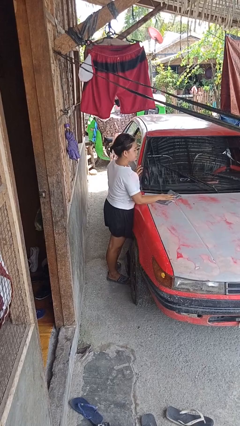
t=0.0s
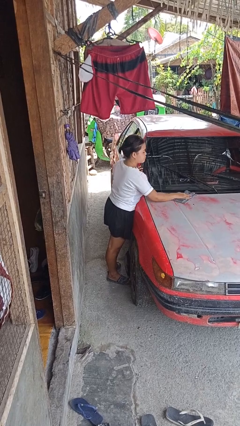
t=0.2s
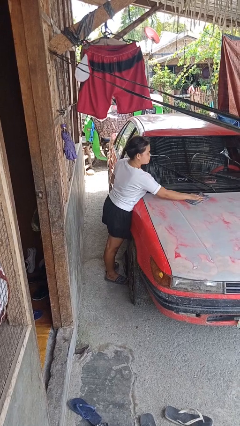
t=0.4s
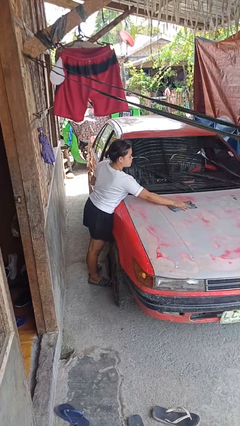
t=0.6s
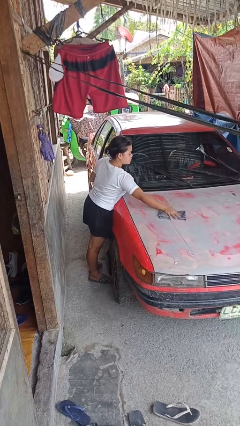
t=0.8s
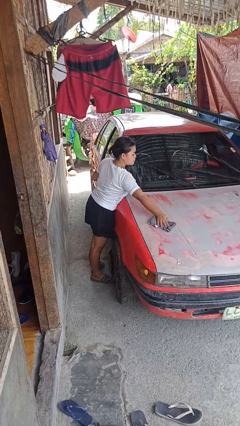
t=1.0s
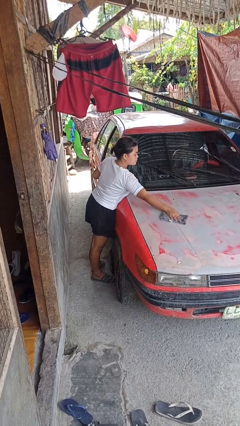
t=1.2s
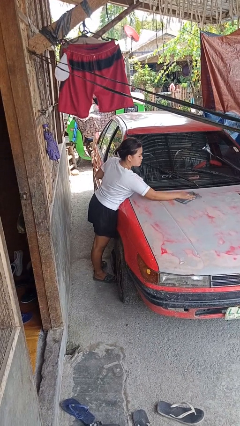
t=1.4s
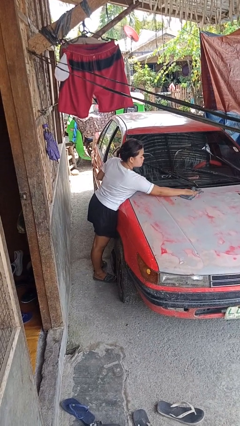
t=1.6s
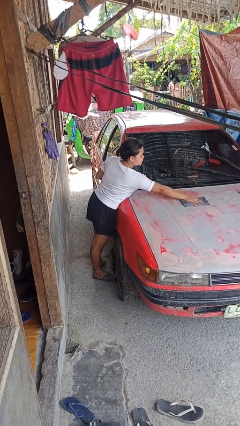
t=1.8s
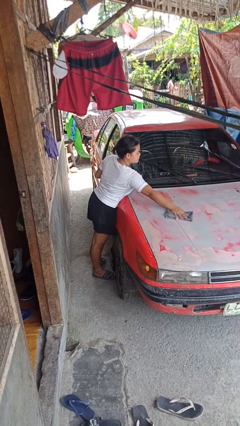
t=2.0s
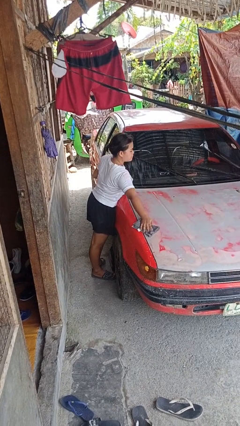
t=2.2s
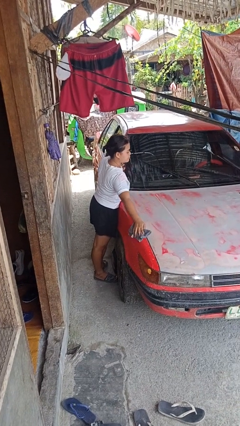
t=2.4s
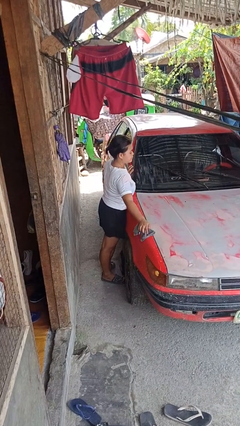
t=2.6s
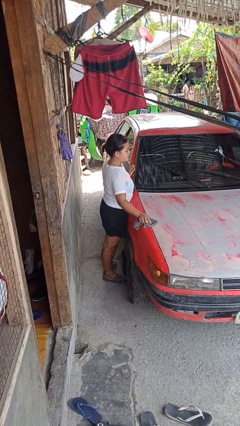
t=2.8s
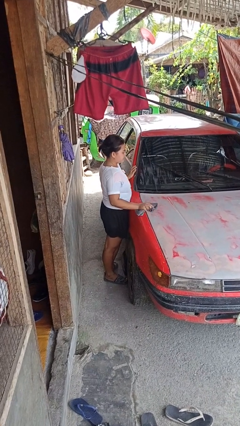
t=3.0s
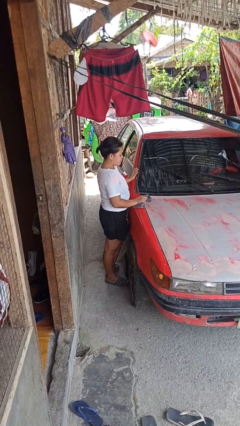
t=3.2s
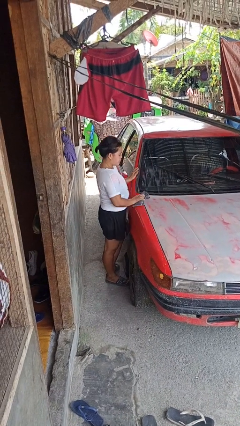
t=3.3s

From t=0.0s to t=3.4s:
person polishes car with rag

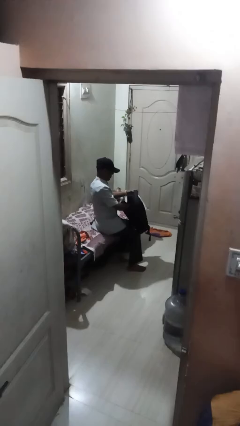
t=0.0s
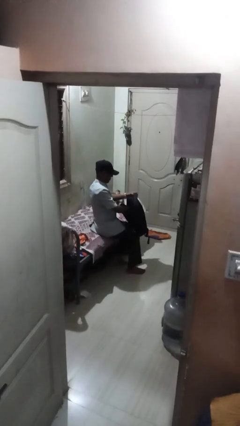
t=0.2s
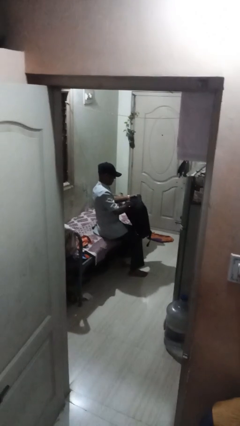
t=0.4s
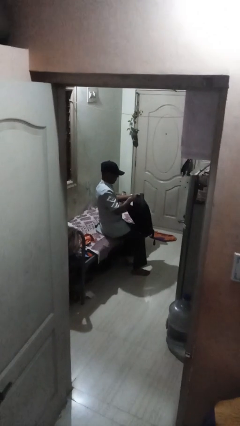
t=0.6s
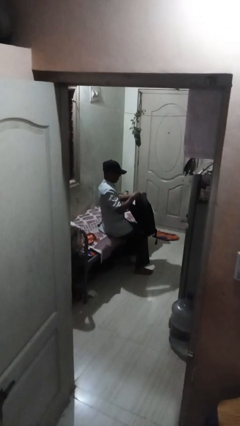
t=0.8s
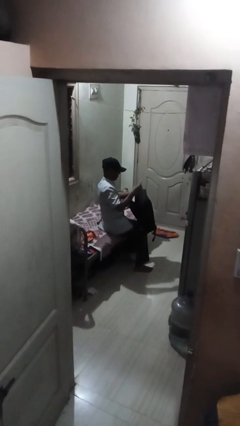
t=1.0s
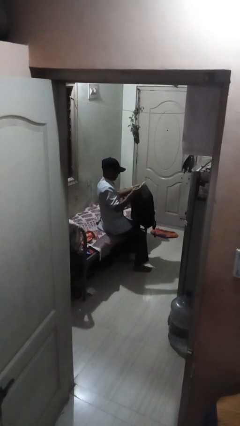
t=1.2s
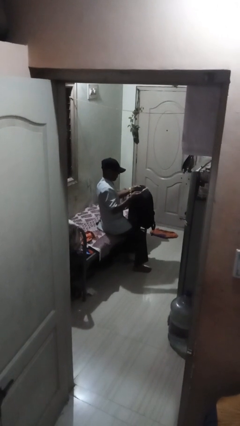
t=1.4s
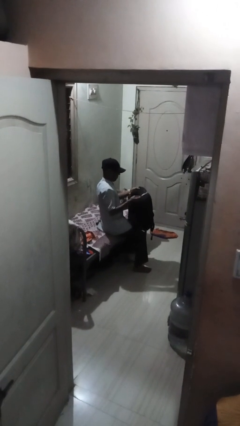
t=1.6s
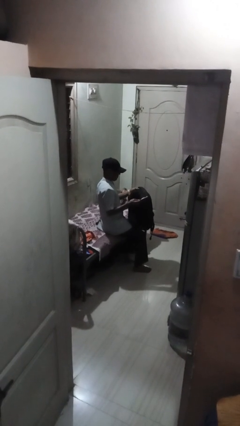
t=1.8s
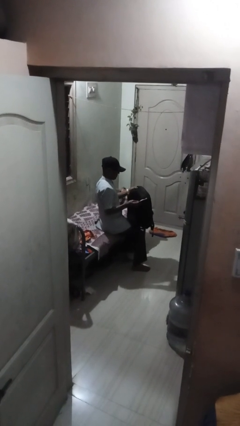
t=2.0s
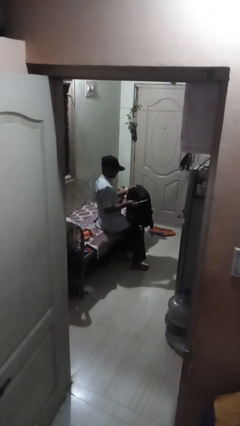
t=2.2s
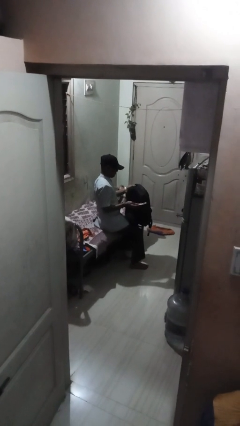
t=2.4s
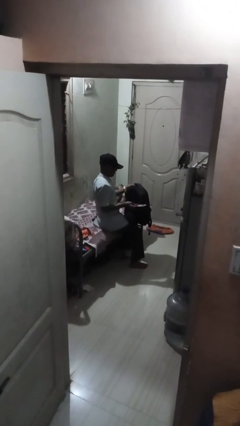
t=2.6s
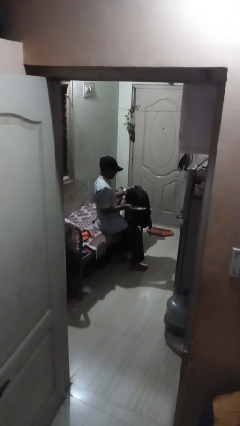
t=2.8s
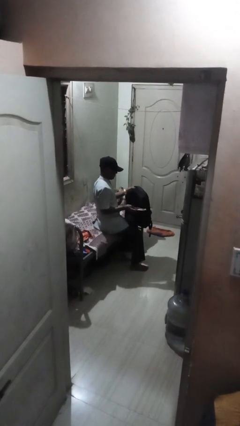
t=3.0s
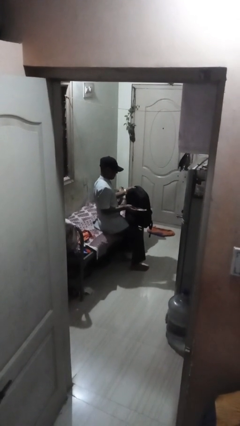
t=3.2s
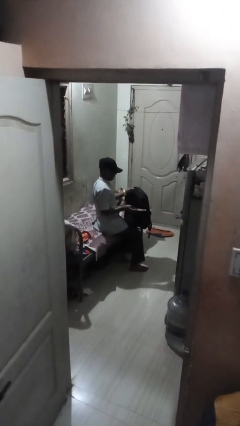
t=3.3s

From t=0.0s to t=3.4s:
person takes object from backpack

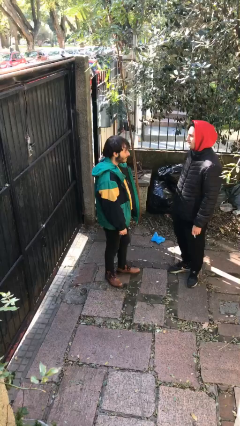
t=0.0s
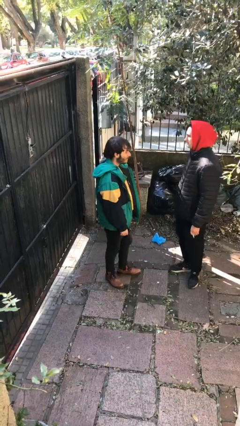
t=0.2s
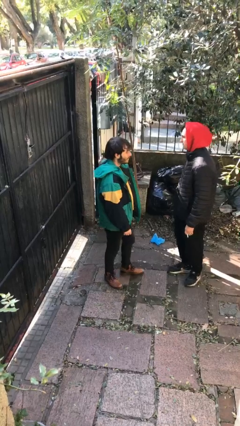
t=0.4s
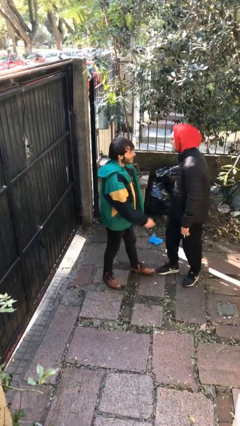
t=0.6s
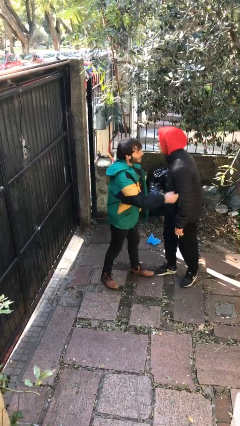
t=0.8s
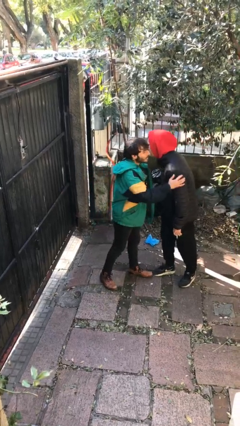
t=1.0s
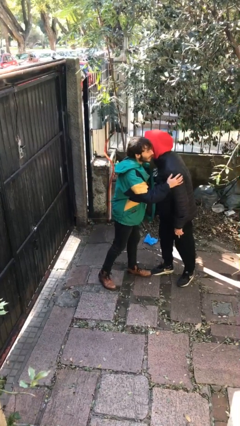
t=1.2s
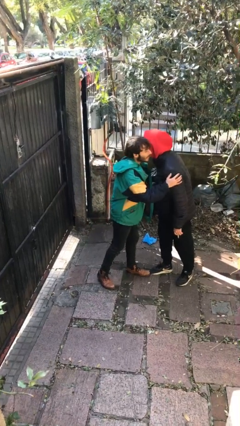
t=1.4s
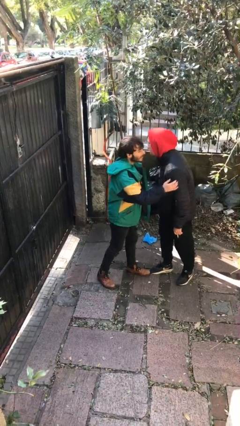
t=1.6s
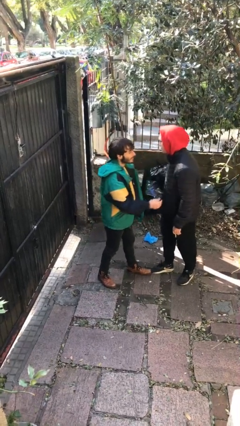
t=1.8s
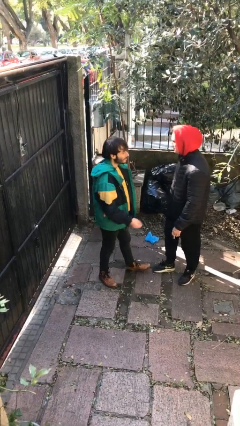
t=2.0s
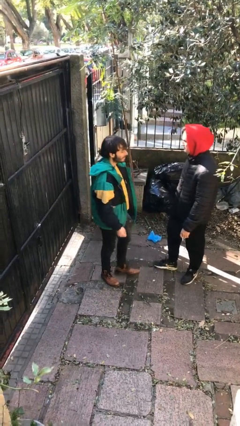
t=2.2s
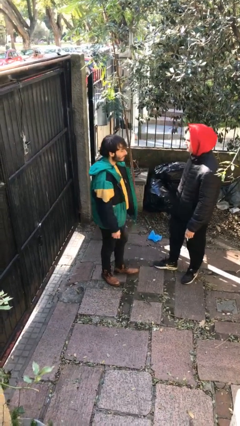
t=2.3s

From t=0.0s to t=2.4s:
person kisses cheek of person

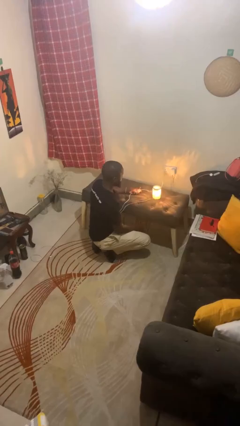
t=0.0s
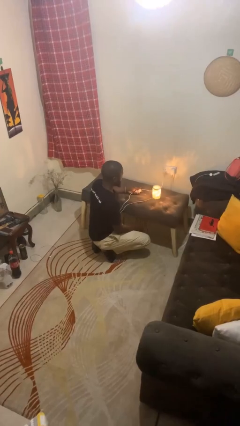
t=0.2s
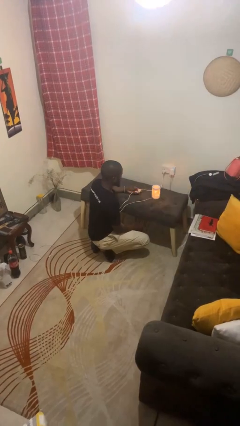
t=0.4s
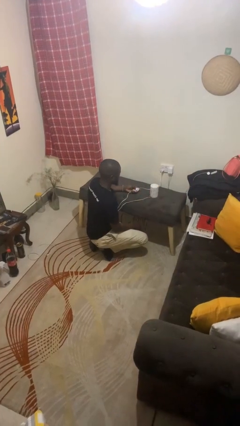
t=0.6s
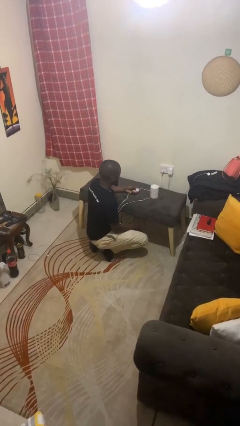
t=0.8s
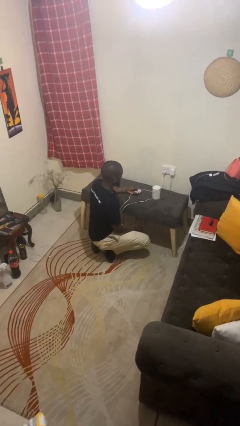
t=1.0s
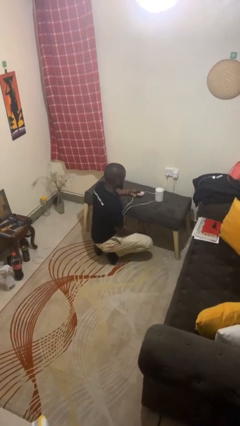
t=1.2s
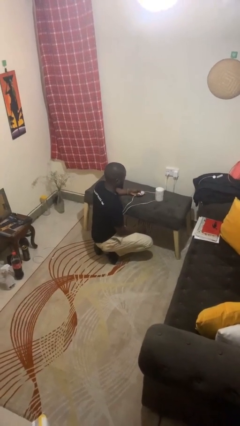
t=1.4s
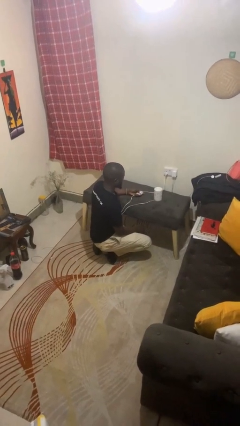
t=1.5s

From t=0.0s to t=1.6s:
person turns off lamp

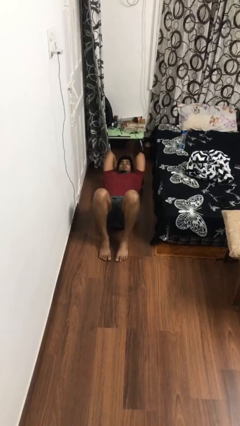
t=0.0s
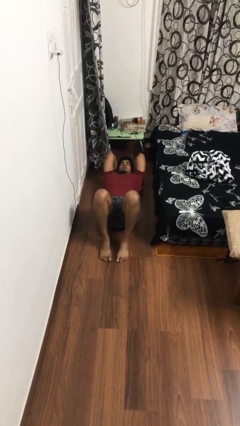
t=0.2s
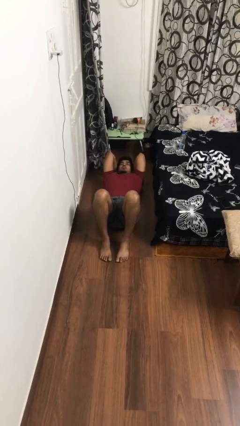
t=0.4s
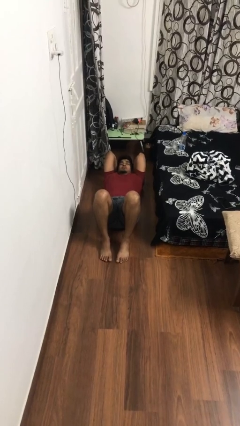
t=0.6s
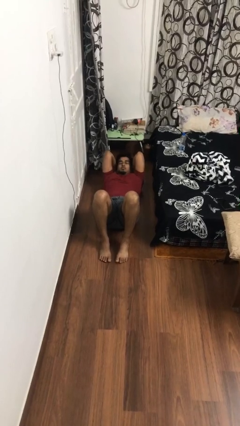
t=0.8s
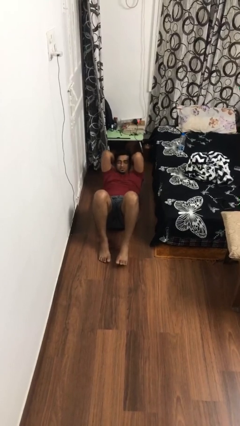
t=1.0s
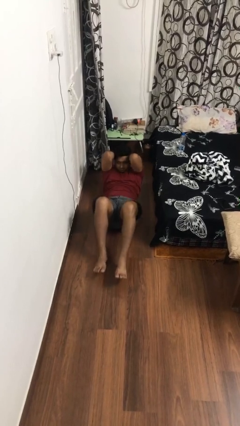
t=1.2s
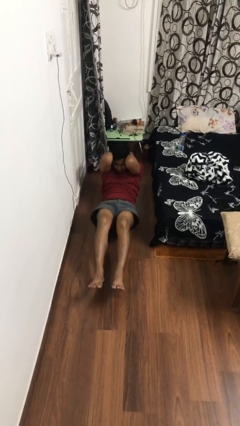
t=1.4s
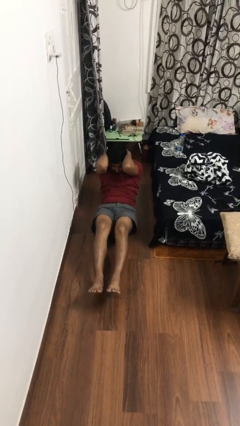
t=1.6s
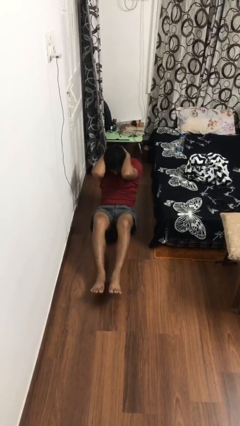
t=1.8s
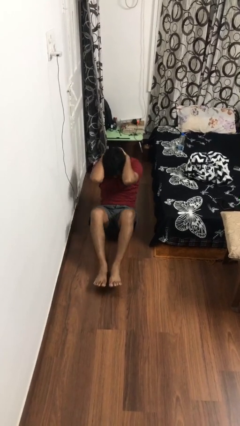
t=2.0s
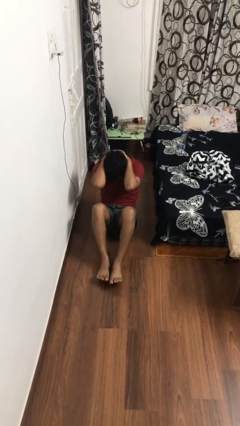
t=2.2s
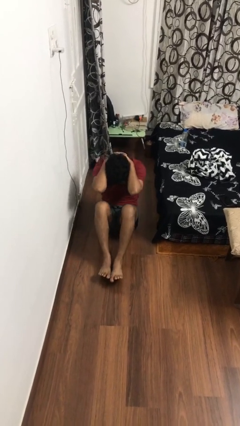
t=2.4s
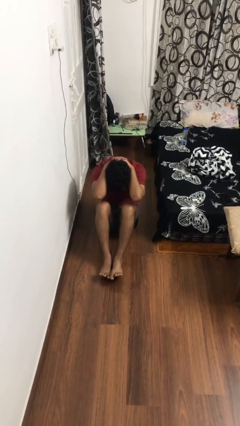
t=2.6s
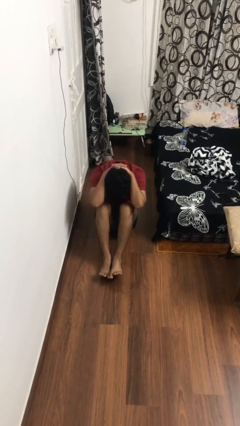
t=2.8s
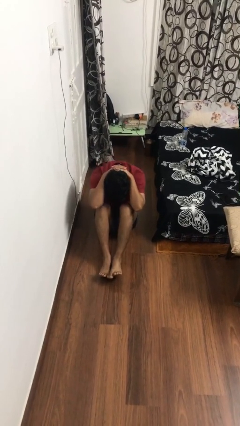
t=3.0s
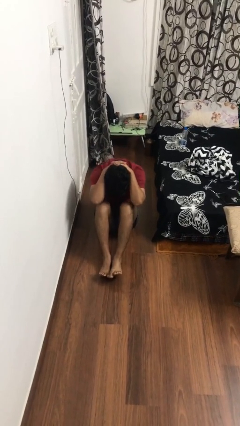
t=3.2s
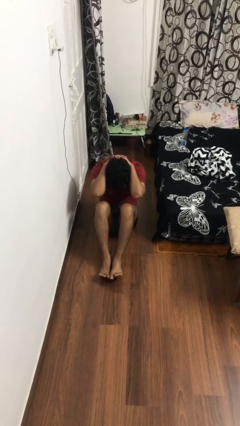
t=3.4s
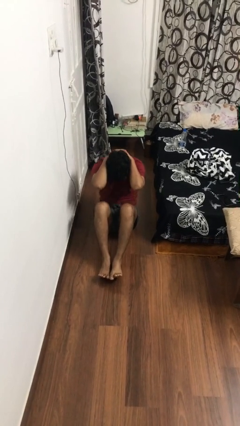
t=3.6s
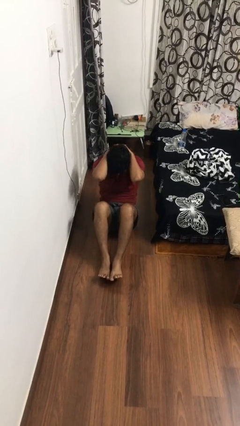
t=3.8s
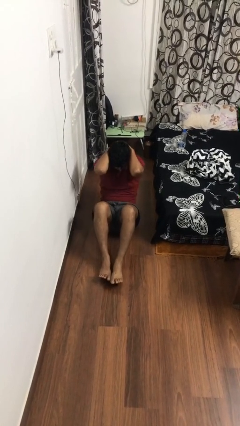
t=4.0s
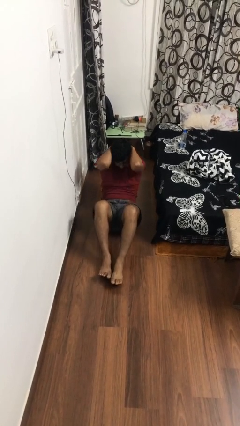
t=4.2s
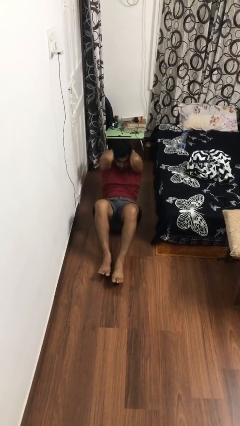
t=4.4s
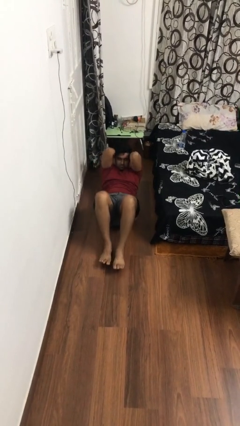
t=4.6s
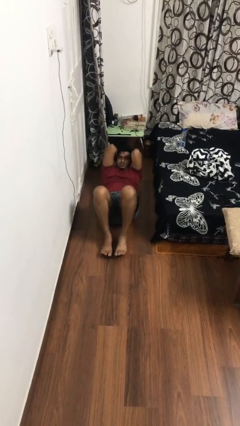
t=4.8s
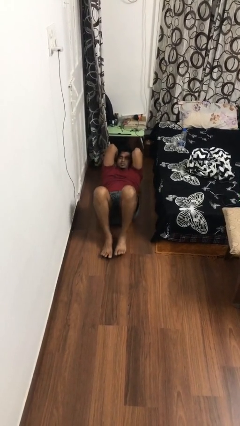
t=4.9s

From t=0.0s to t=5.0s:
person exercises with situp

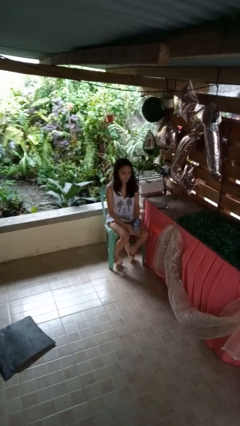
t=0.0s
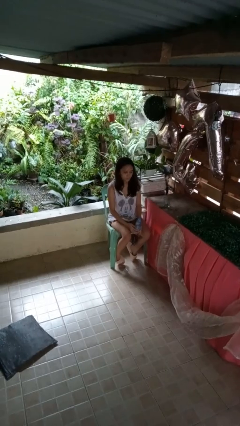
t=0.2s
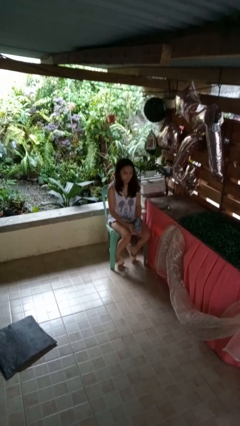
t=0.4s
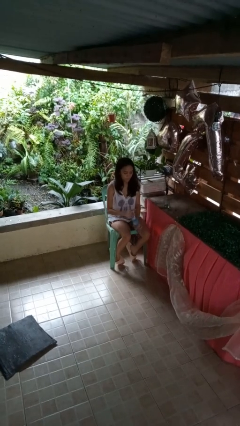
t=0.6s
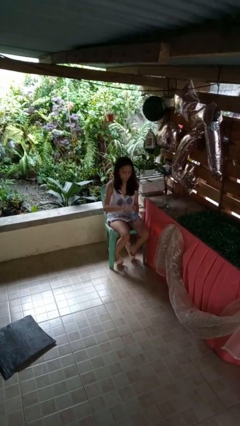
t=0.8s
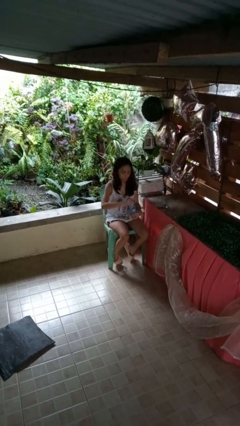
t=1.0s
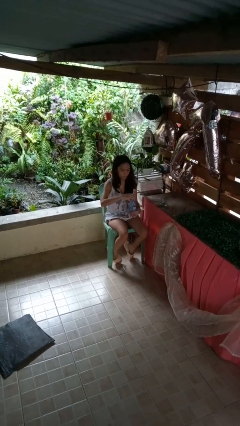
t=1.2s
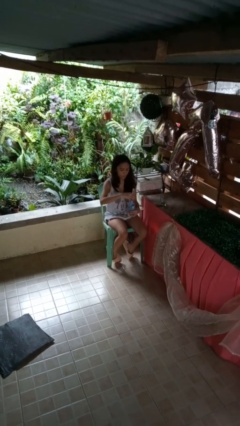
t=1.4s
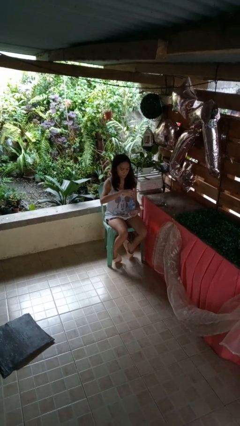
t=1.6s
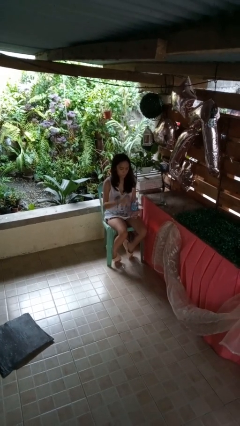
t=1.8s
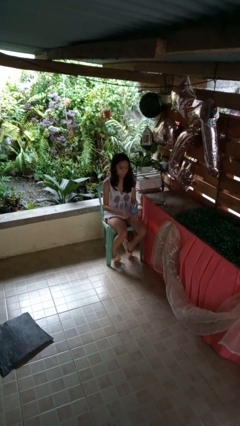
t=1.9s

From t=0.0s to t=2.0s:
person unscrews lid from bottle
